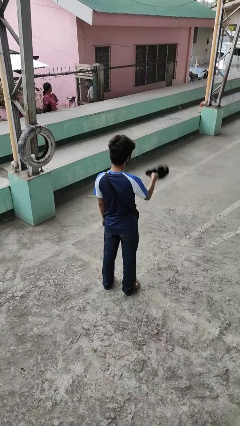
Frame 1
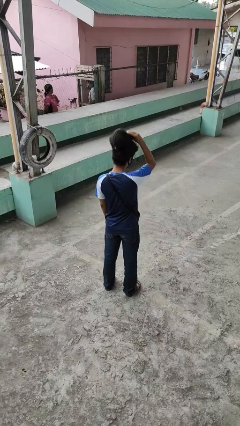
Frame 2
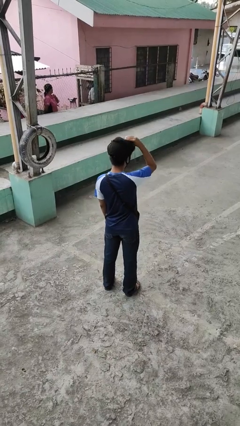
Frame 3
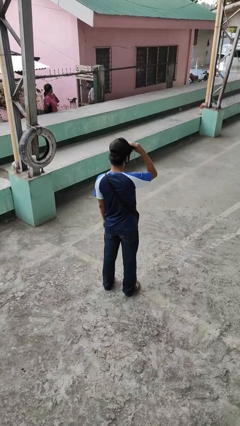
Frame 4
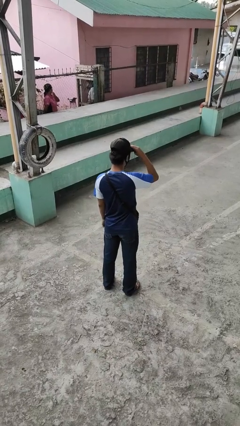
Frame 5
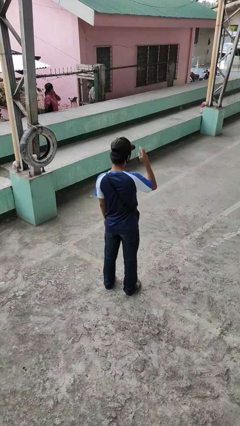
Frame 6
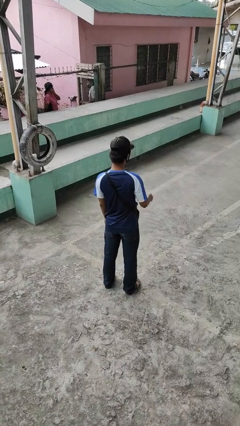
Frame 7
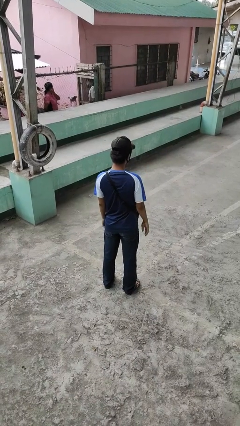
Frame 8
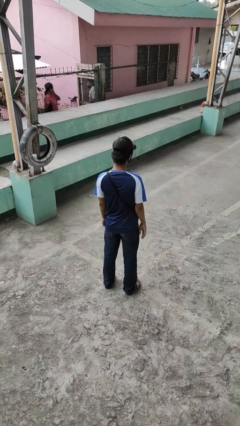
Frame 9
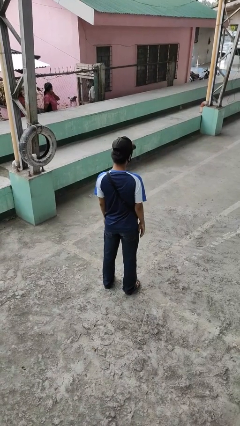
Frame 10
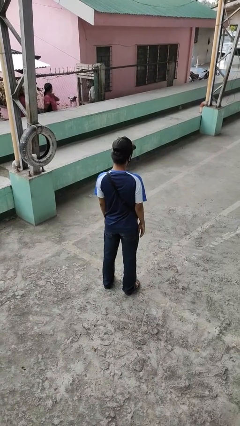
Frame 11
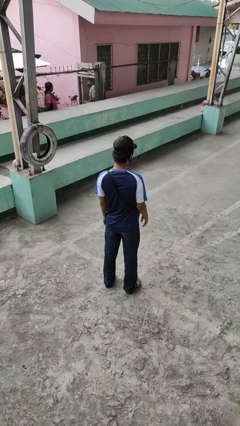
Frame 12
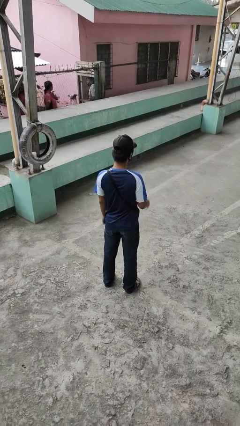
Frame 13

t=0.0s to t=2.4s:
person puts on hat

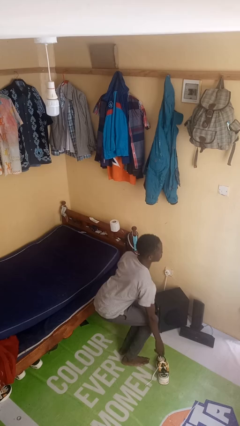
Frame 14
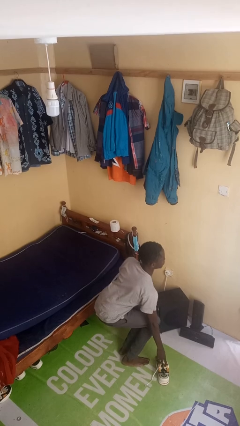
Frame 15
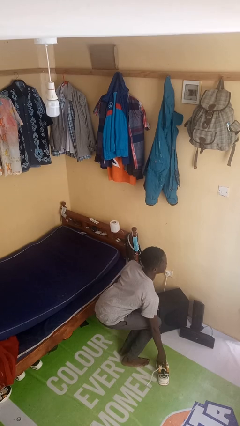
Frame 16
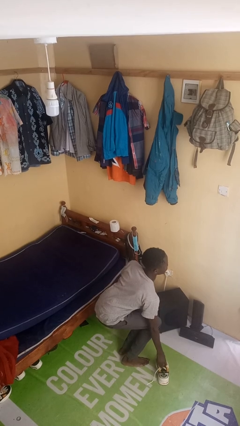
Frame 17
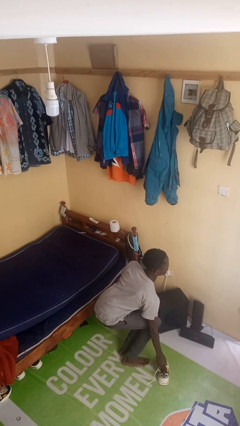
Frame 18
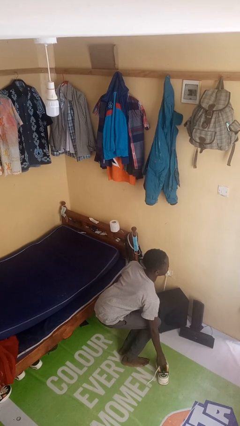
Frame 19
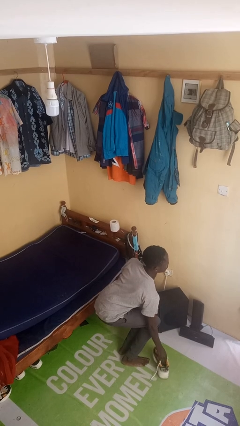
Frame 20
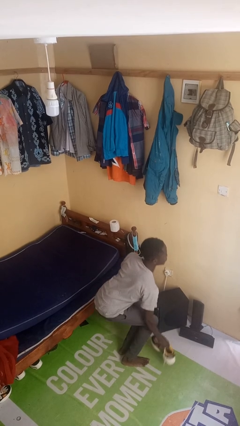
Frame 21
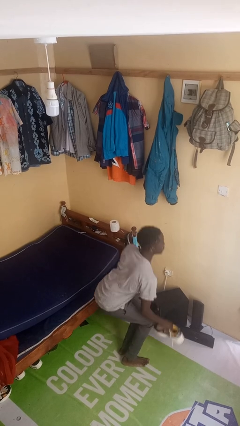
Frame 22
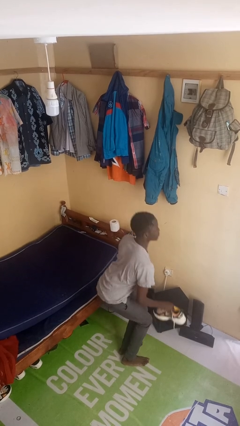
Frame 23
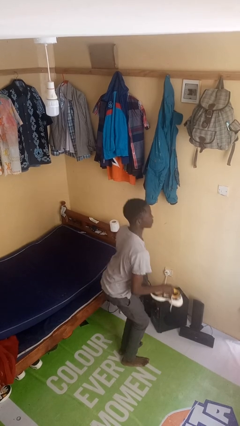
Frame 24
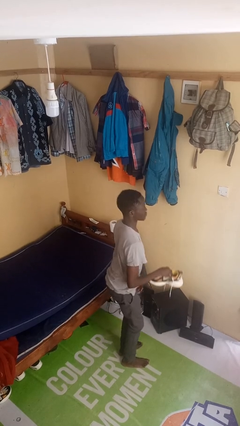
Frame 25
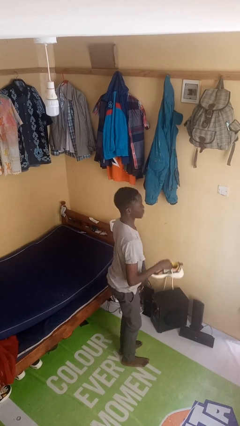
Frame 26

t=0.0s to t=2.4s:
person picks up object from floor

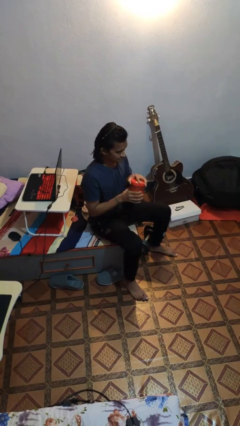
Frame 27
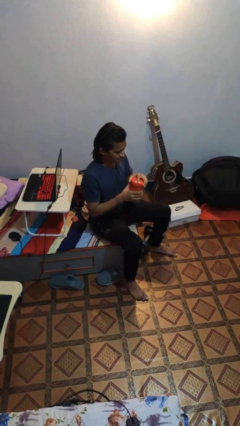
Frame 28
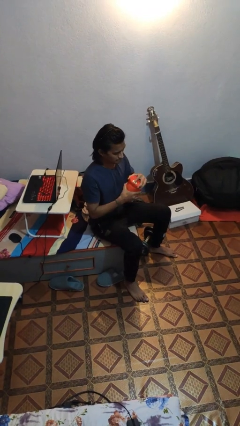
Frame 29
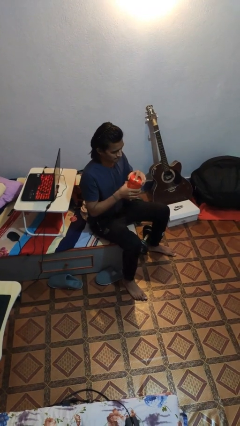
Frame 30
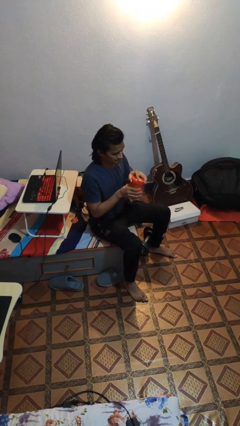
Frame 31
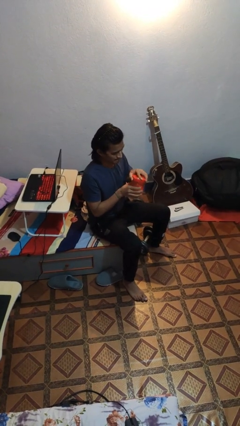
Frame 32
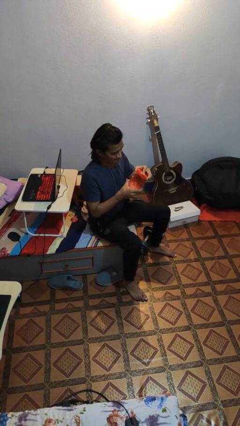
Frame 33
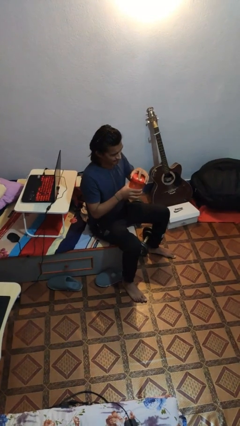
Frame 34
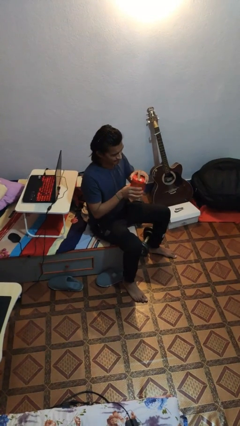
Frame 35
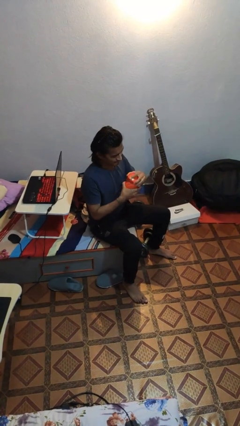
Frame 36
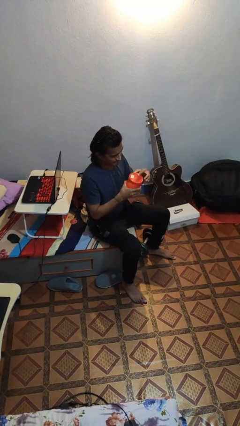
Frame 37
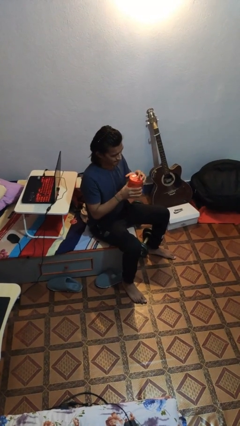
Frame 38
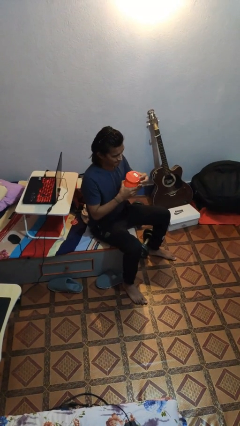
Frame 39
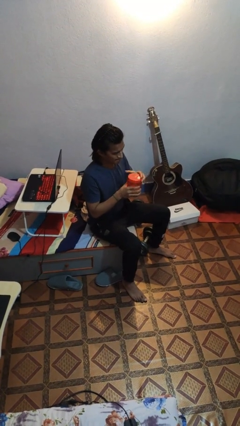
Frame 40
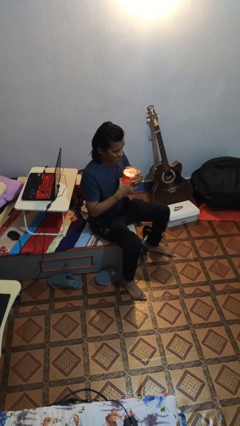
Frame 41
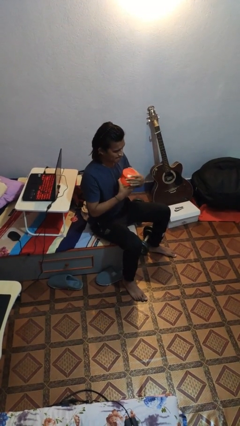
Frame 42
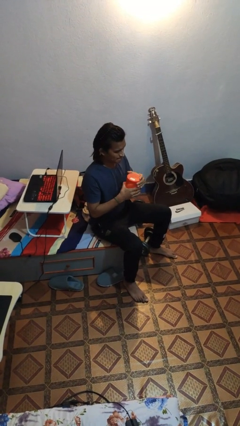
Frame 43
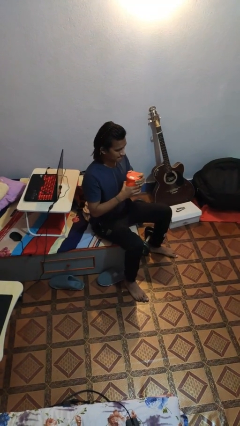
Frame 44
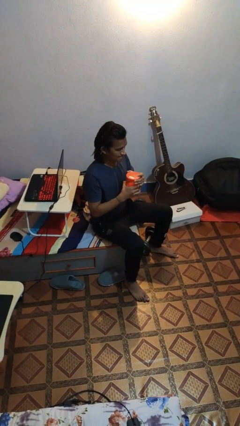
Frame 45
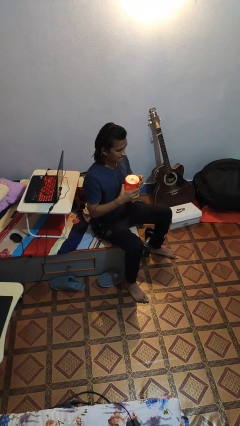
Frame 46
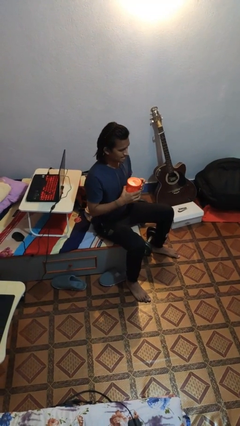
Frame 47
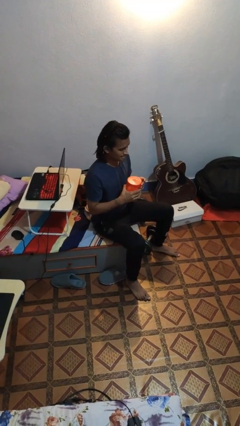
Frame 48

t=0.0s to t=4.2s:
person closes jar

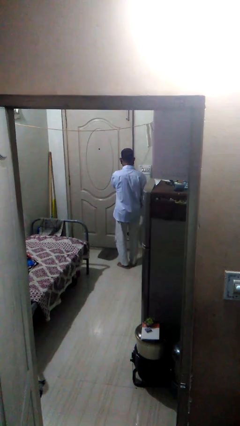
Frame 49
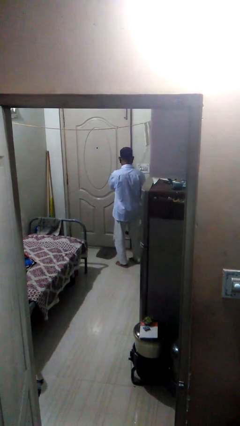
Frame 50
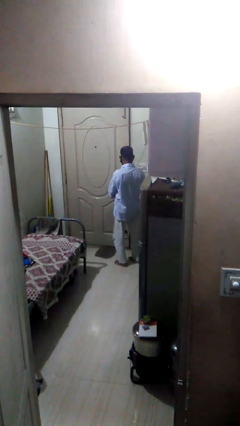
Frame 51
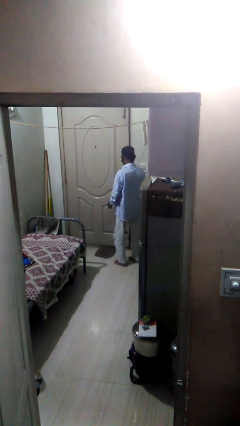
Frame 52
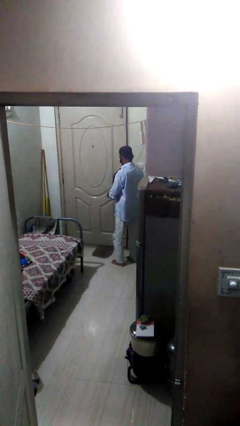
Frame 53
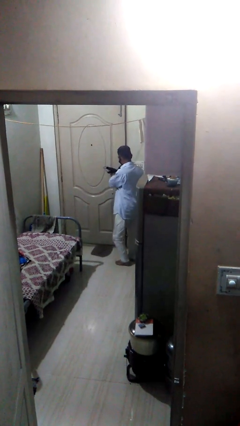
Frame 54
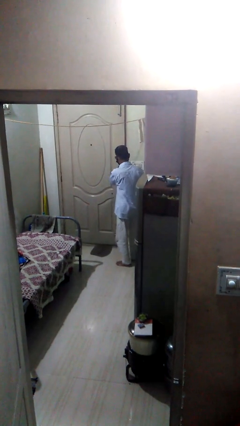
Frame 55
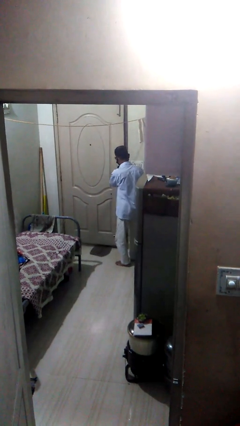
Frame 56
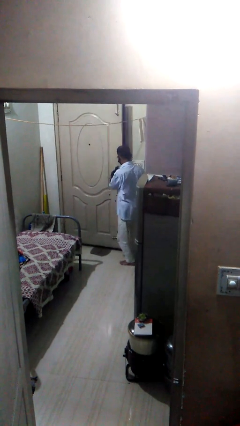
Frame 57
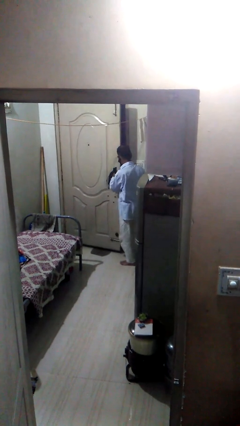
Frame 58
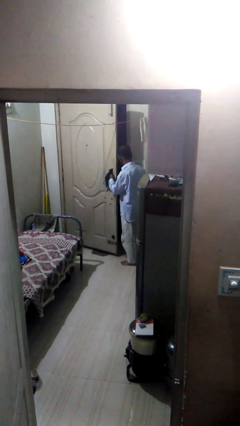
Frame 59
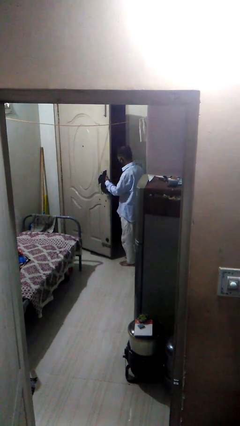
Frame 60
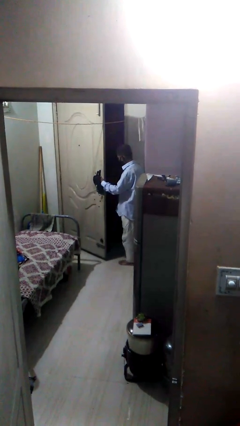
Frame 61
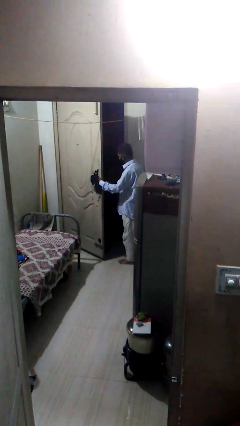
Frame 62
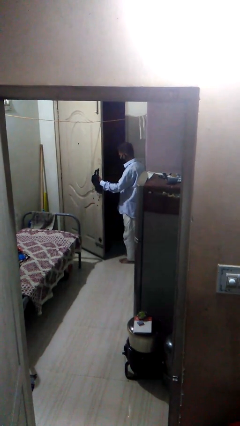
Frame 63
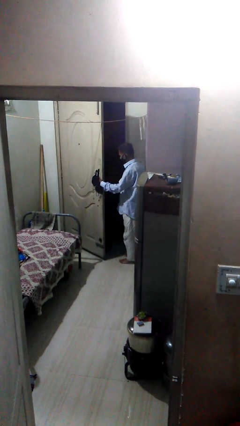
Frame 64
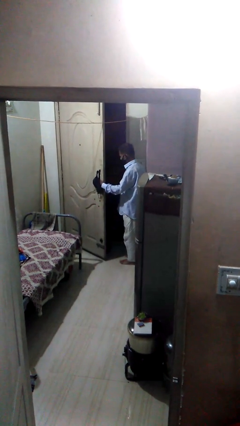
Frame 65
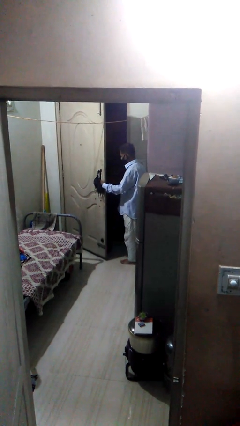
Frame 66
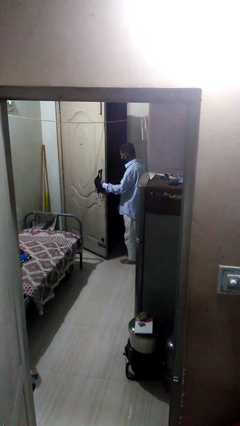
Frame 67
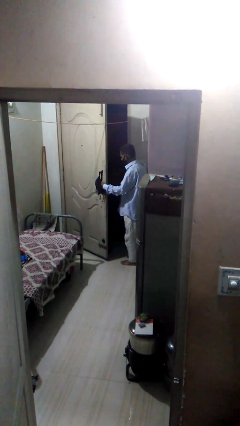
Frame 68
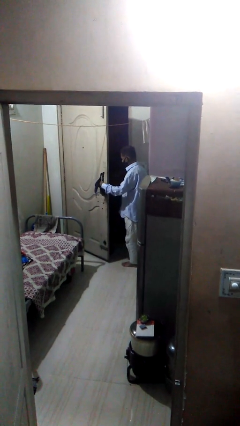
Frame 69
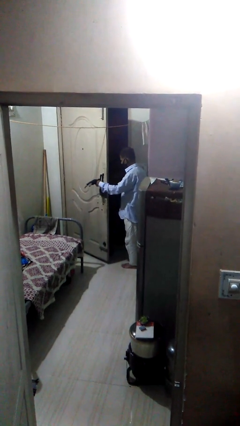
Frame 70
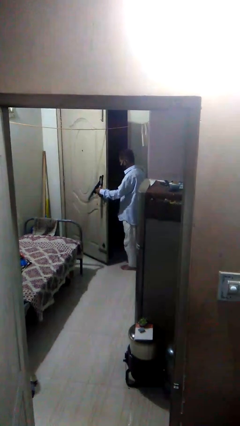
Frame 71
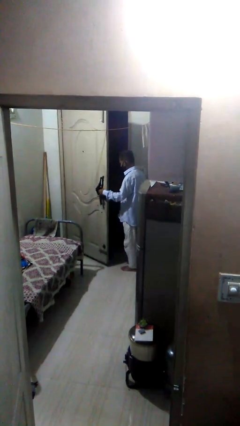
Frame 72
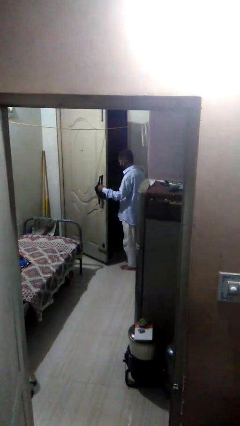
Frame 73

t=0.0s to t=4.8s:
person opens facility door

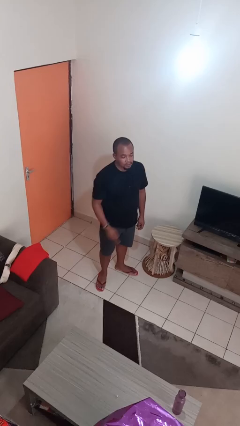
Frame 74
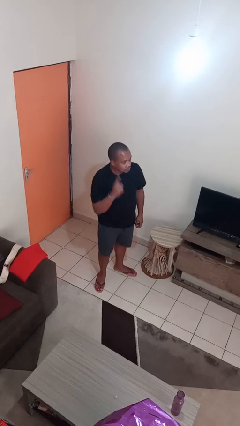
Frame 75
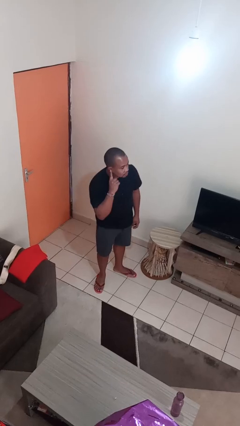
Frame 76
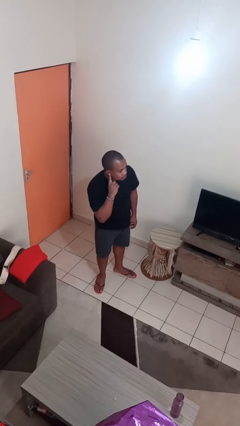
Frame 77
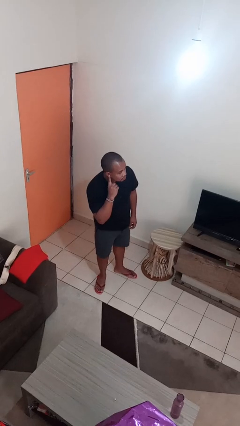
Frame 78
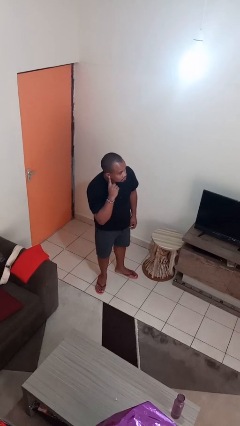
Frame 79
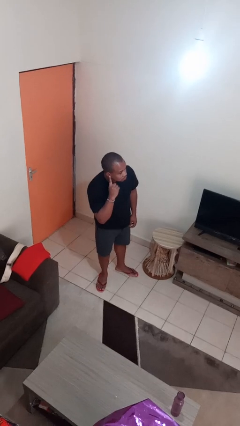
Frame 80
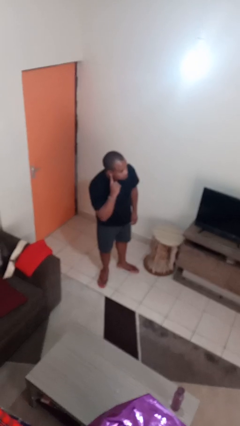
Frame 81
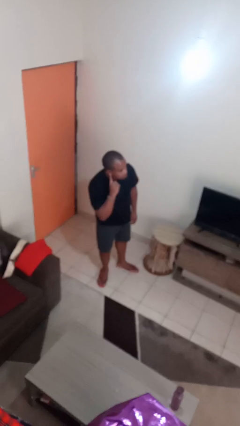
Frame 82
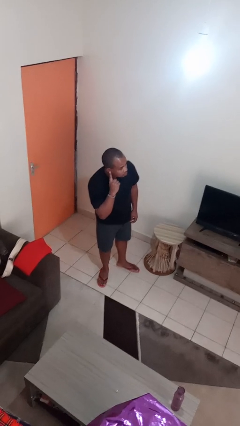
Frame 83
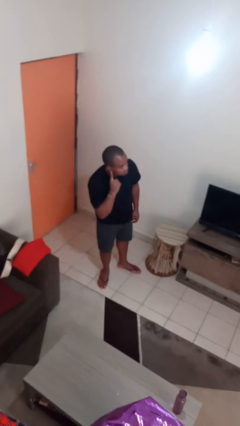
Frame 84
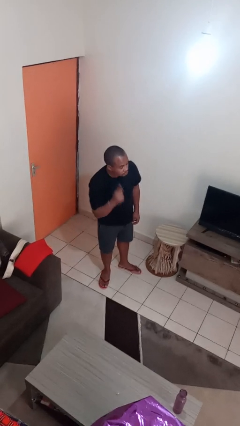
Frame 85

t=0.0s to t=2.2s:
person gestures listen closely

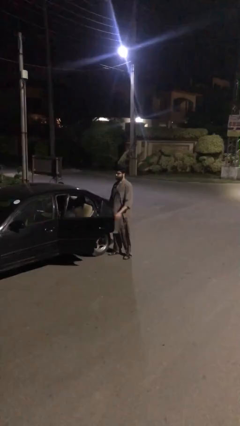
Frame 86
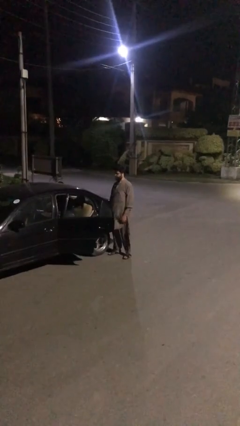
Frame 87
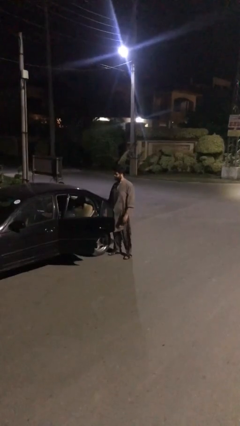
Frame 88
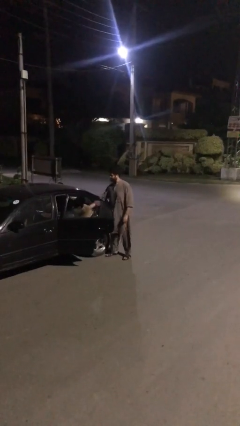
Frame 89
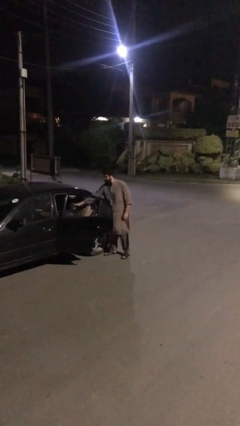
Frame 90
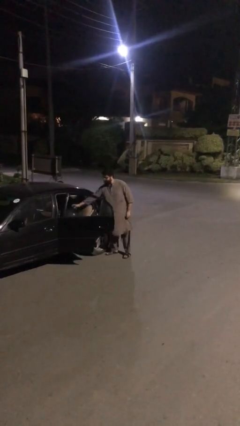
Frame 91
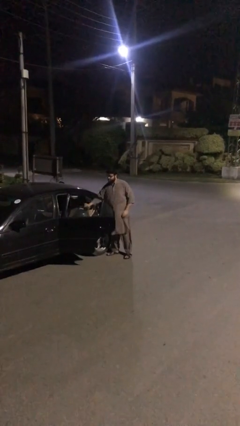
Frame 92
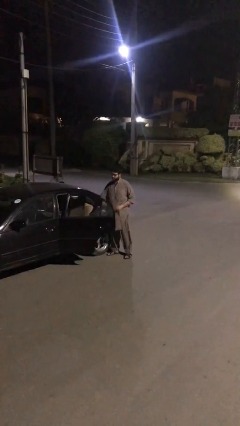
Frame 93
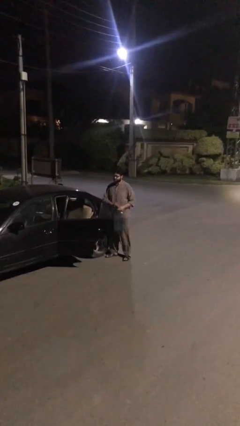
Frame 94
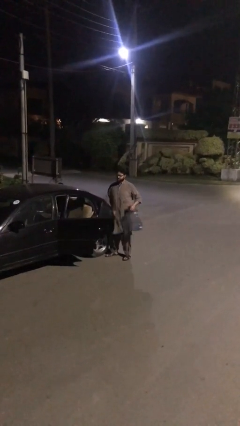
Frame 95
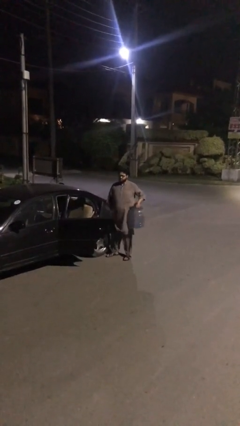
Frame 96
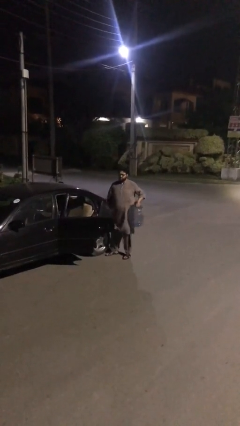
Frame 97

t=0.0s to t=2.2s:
person unloads car
